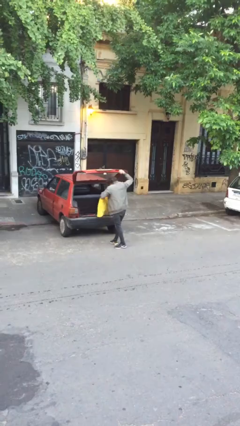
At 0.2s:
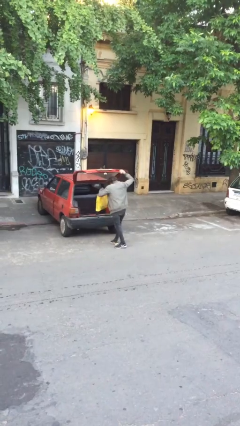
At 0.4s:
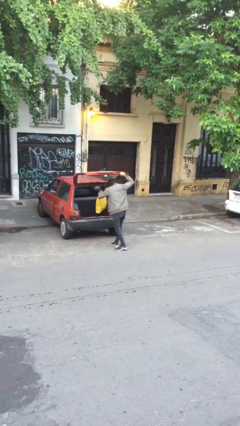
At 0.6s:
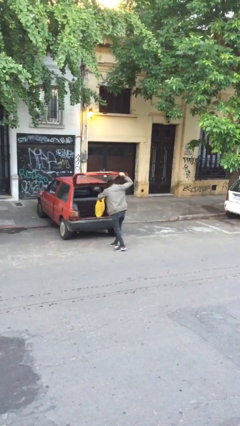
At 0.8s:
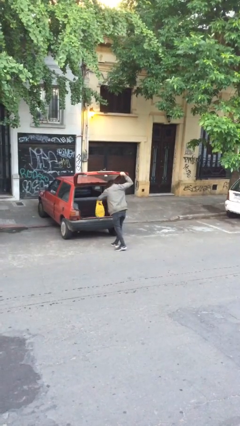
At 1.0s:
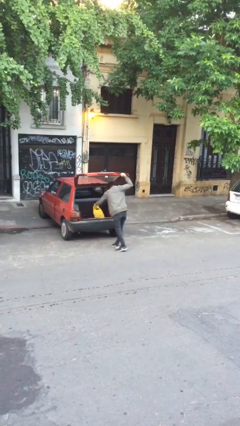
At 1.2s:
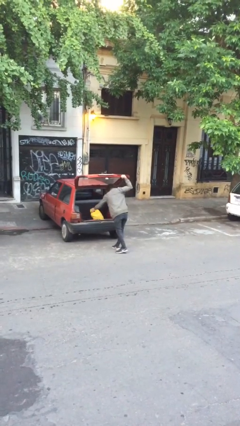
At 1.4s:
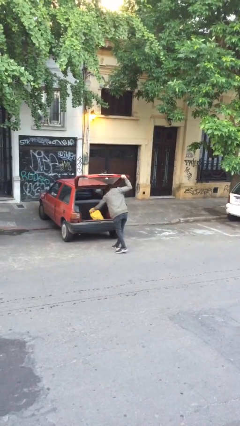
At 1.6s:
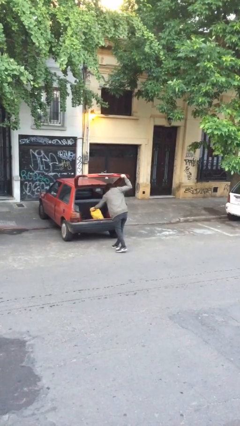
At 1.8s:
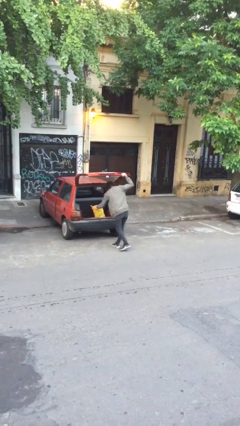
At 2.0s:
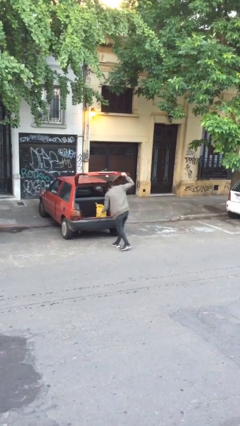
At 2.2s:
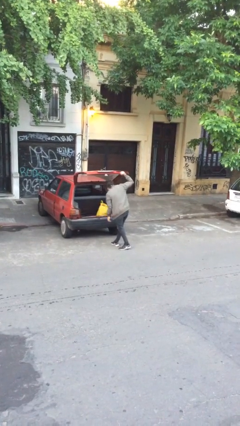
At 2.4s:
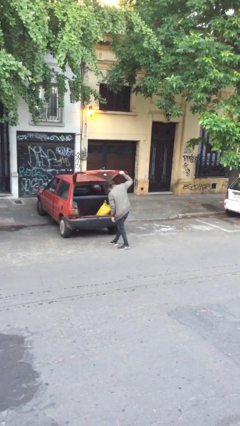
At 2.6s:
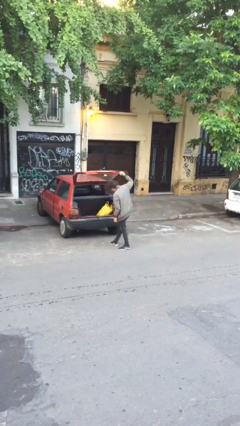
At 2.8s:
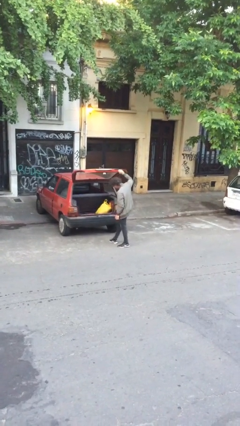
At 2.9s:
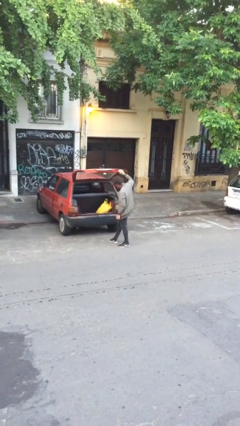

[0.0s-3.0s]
person loads car

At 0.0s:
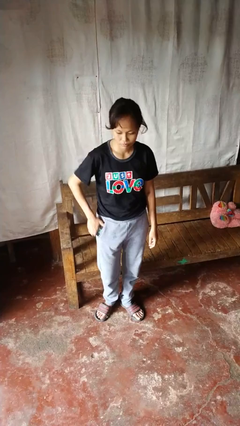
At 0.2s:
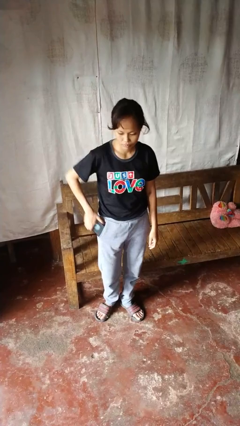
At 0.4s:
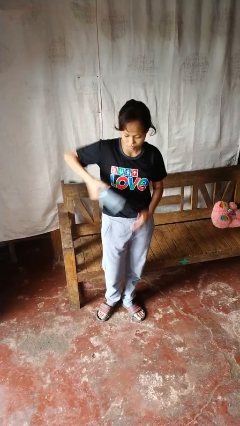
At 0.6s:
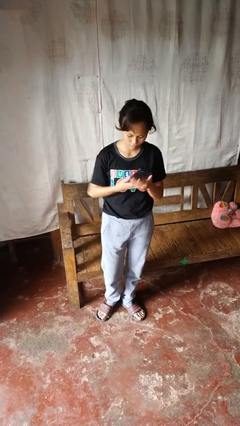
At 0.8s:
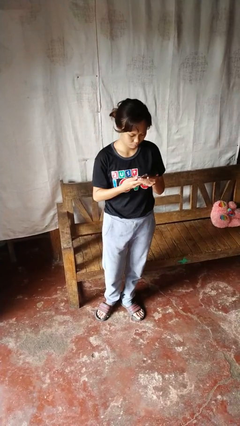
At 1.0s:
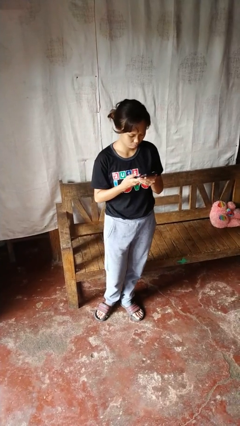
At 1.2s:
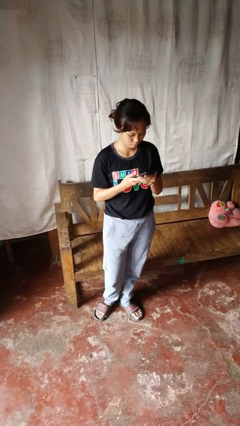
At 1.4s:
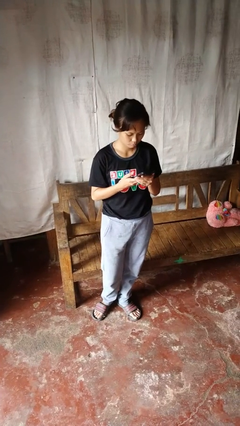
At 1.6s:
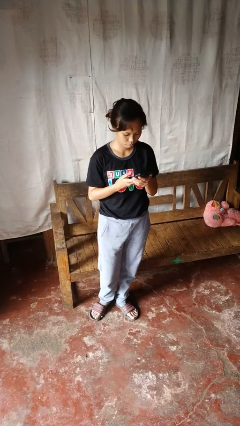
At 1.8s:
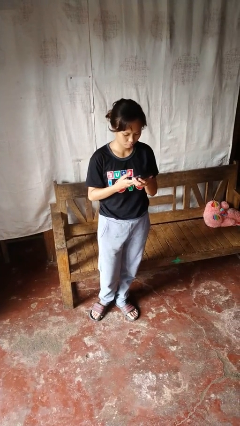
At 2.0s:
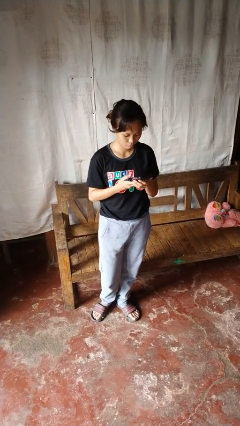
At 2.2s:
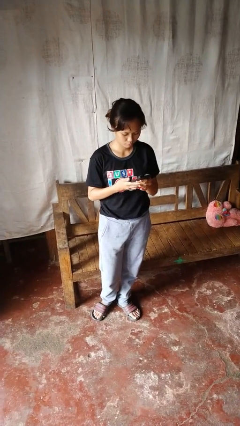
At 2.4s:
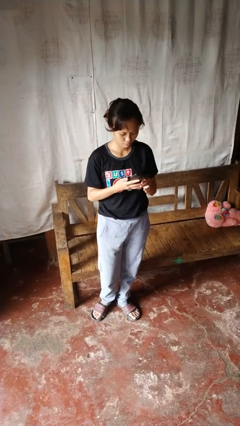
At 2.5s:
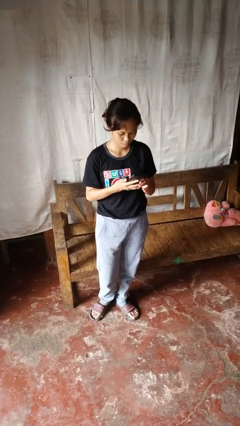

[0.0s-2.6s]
person takes phone from pocket

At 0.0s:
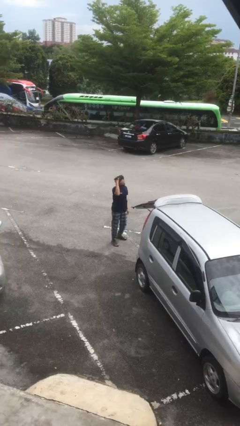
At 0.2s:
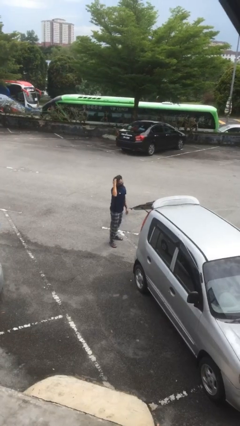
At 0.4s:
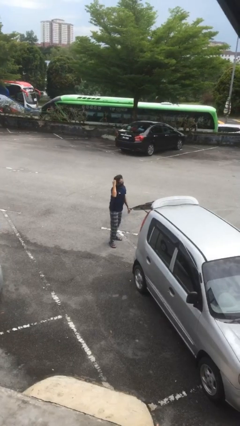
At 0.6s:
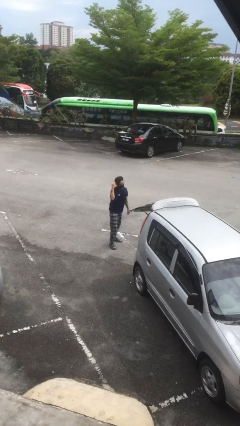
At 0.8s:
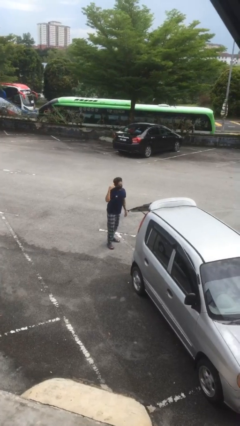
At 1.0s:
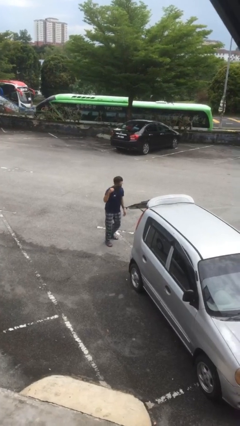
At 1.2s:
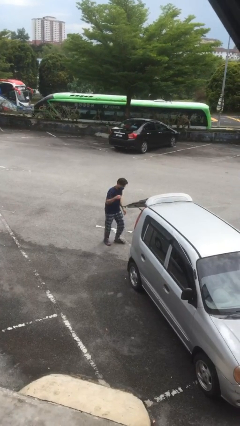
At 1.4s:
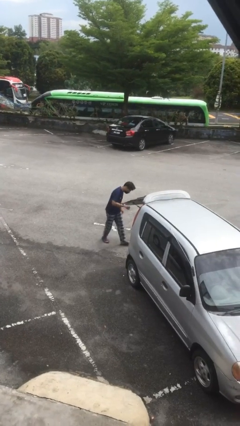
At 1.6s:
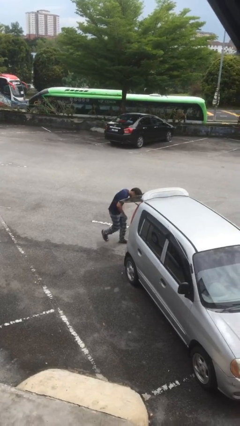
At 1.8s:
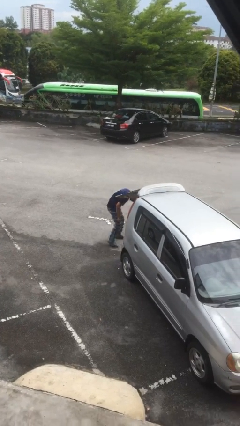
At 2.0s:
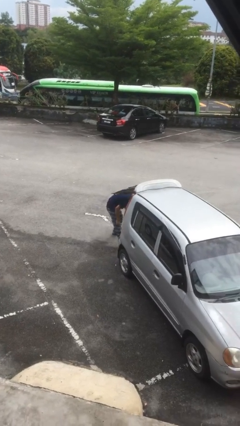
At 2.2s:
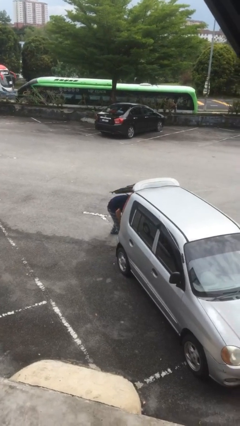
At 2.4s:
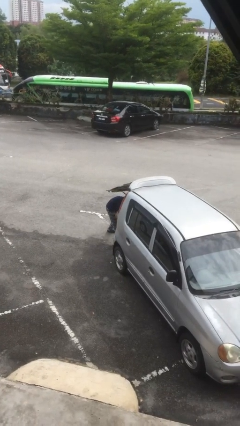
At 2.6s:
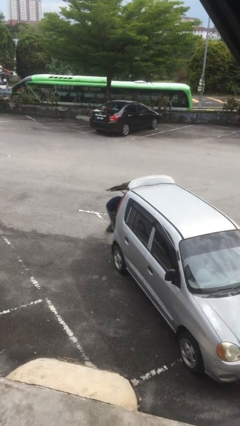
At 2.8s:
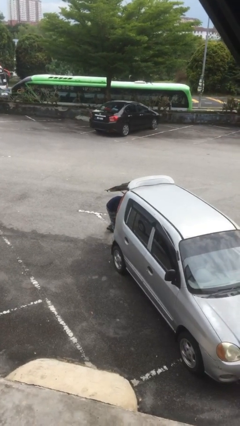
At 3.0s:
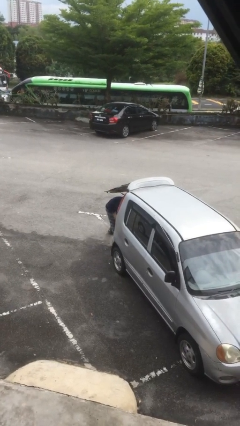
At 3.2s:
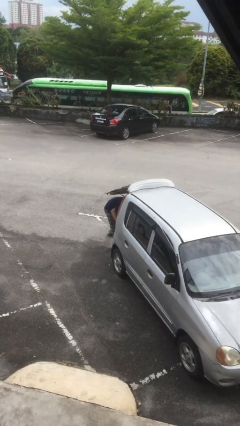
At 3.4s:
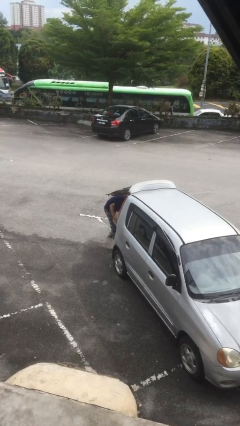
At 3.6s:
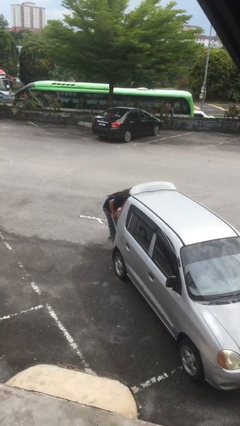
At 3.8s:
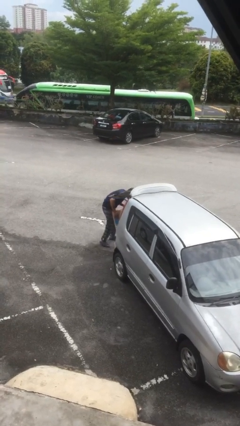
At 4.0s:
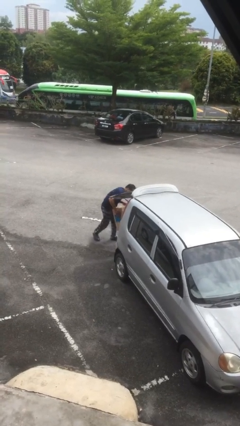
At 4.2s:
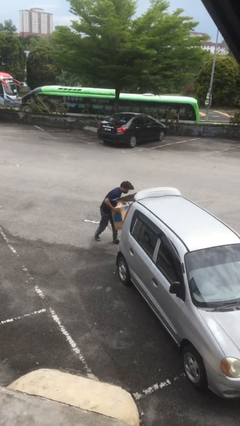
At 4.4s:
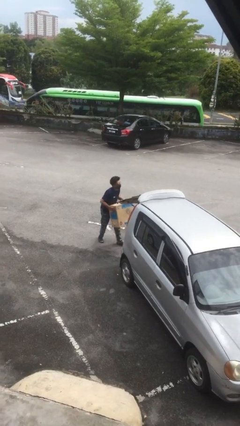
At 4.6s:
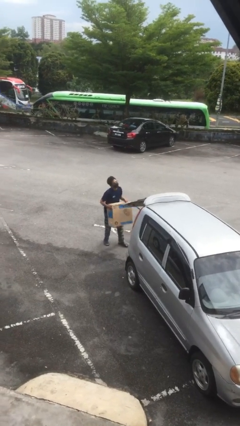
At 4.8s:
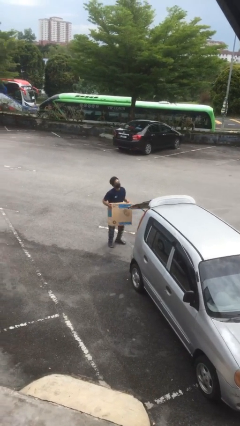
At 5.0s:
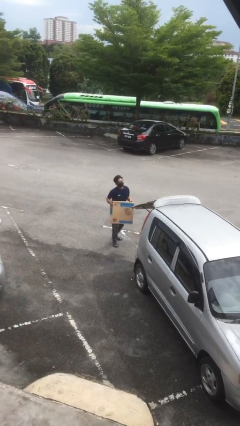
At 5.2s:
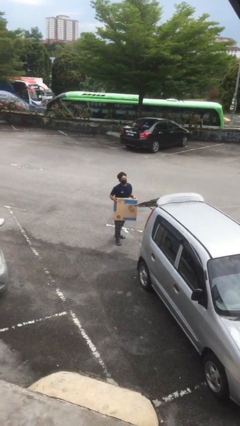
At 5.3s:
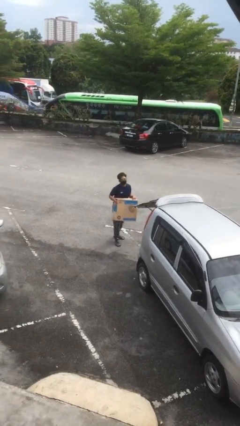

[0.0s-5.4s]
person unloads car

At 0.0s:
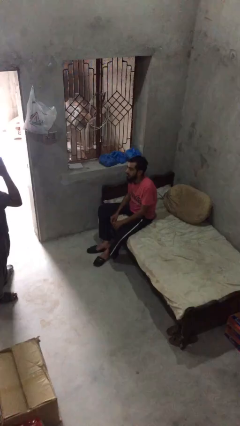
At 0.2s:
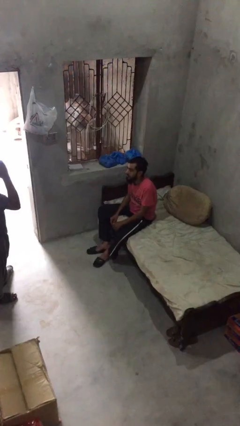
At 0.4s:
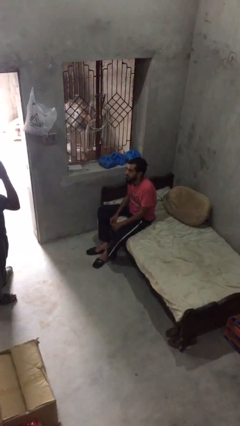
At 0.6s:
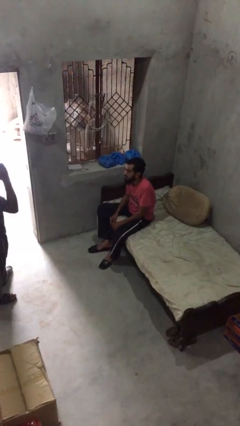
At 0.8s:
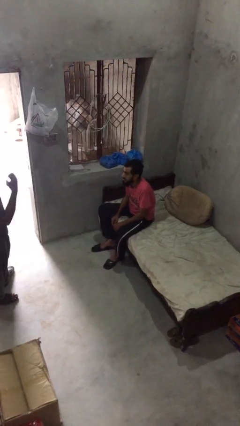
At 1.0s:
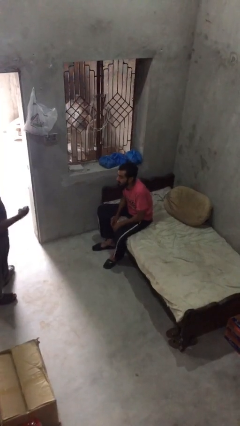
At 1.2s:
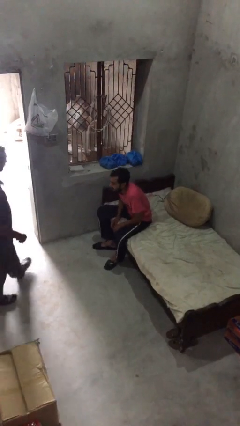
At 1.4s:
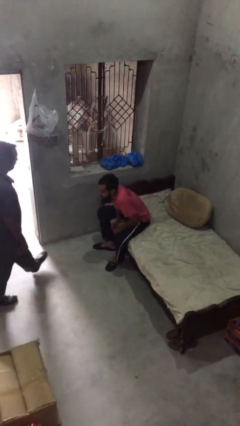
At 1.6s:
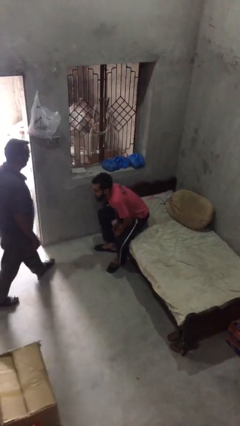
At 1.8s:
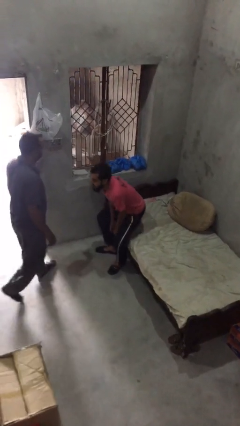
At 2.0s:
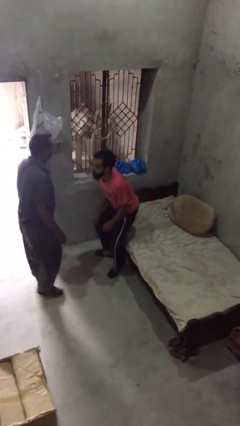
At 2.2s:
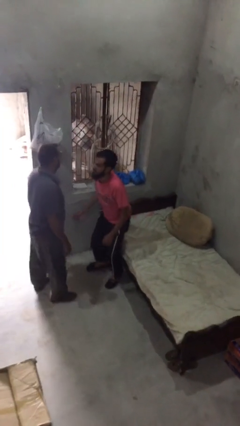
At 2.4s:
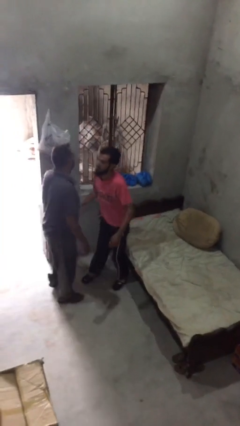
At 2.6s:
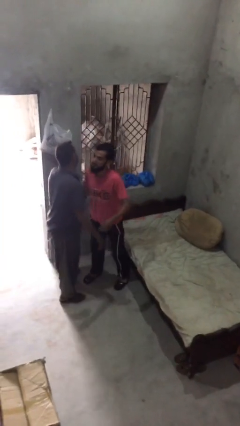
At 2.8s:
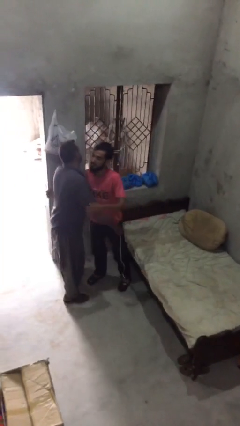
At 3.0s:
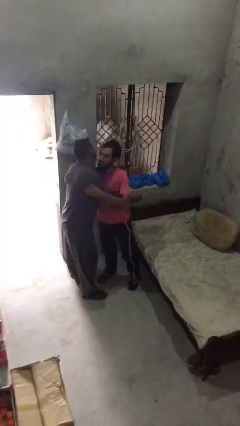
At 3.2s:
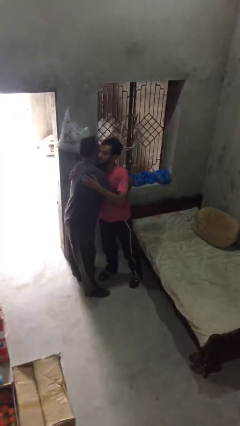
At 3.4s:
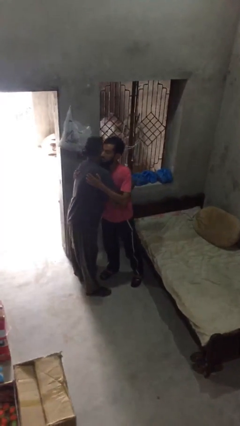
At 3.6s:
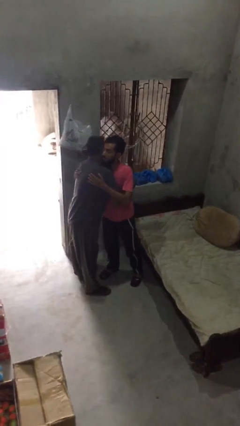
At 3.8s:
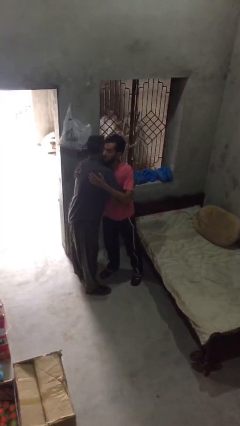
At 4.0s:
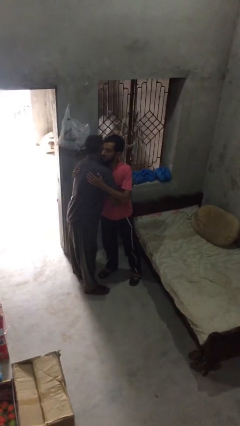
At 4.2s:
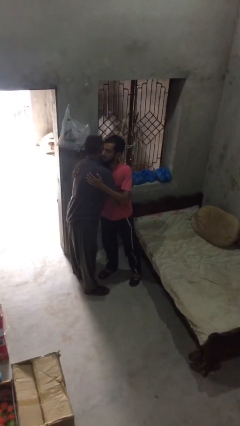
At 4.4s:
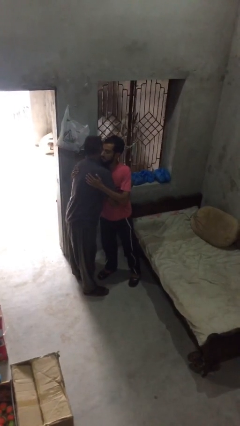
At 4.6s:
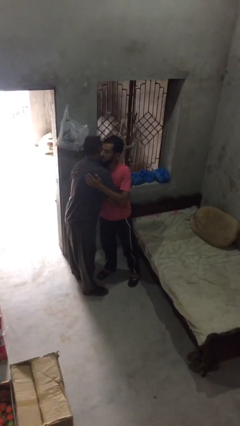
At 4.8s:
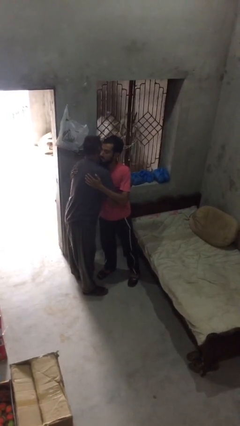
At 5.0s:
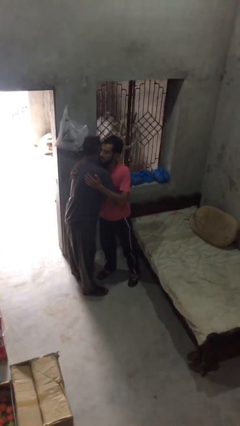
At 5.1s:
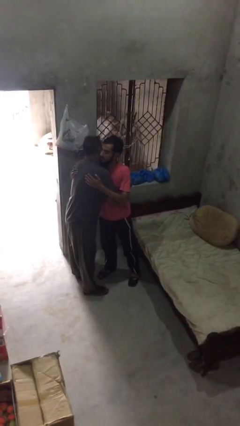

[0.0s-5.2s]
person embraces person

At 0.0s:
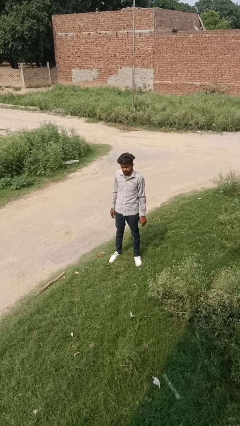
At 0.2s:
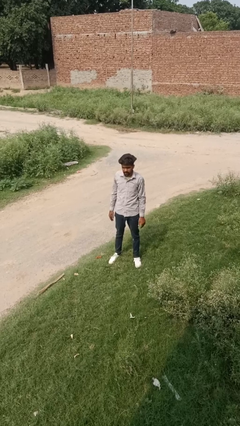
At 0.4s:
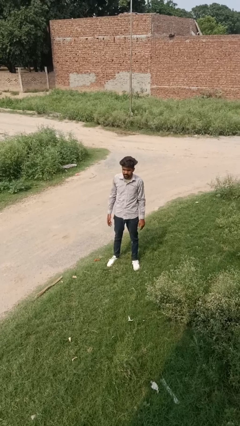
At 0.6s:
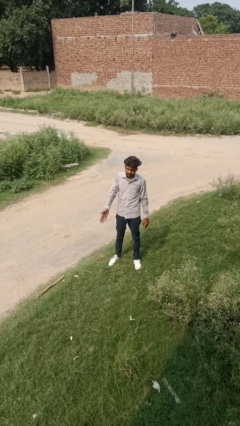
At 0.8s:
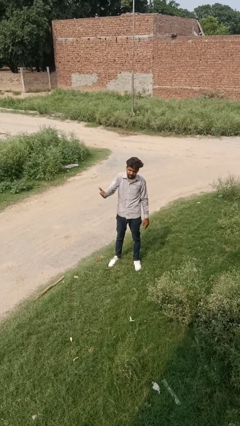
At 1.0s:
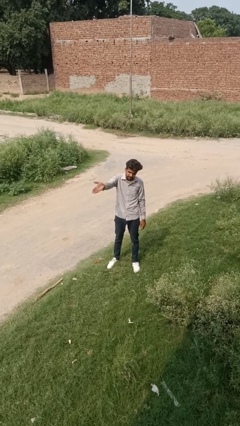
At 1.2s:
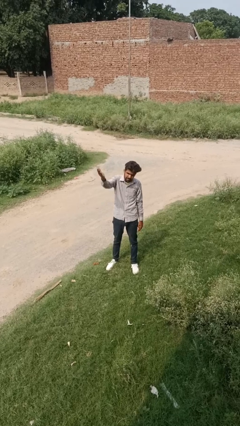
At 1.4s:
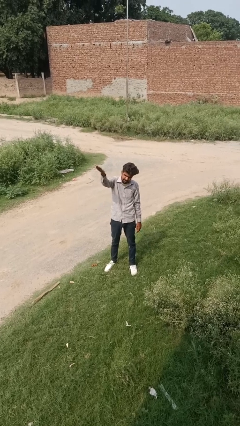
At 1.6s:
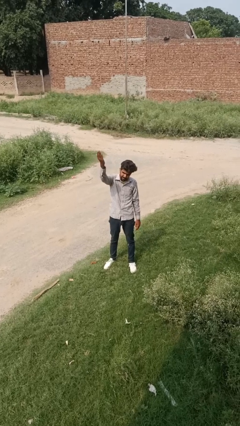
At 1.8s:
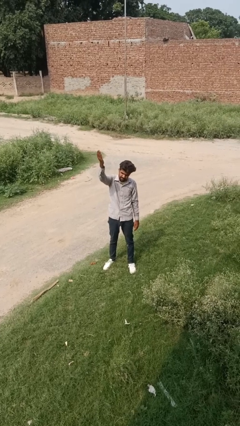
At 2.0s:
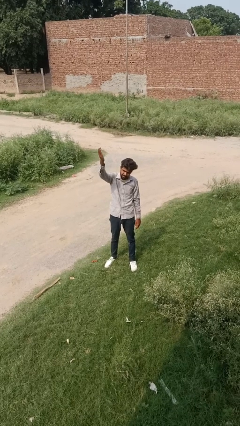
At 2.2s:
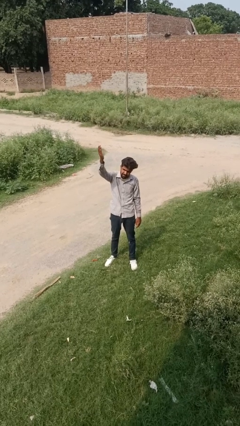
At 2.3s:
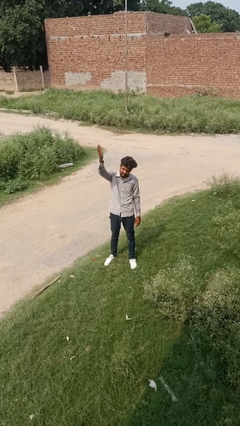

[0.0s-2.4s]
person gestures swipe up
